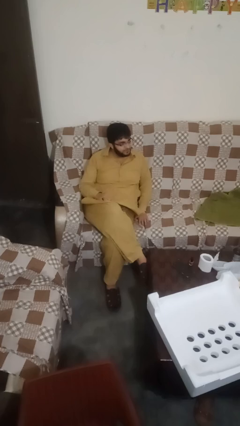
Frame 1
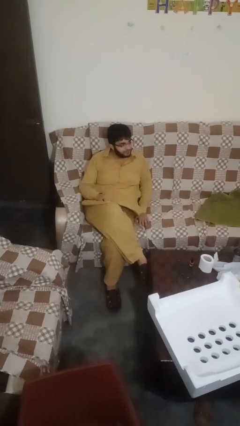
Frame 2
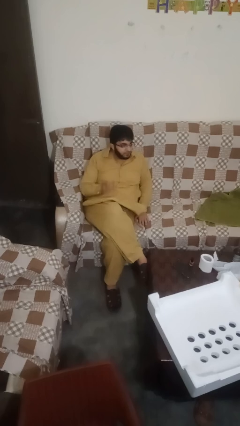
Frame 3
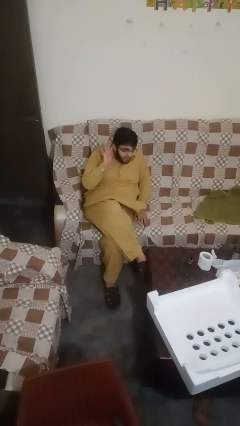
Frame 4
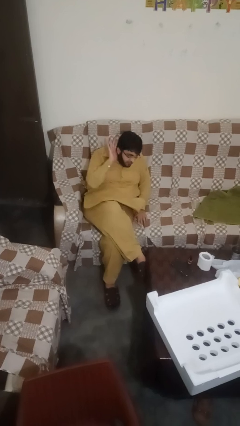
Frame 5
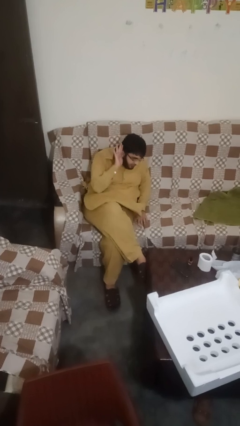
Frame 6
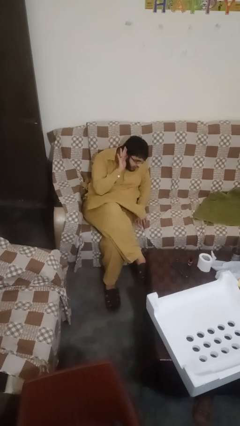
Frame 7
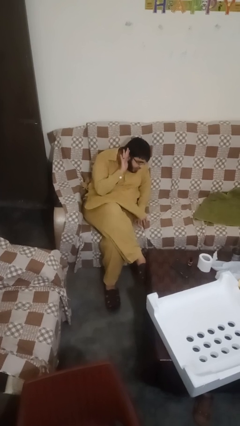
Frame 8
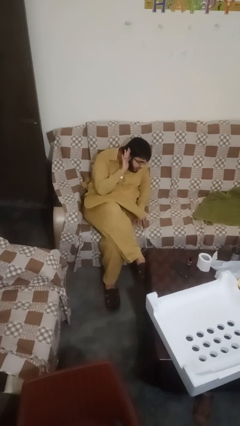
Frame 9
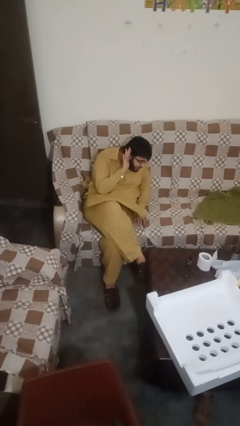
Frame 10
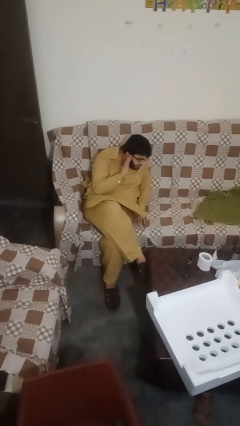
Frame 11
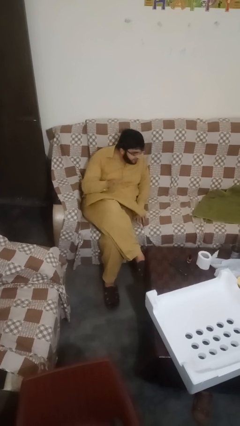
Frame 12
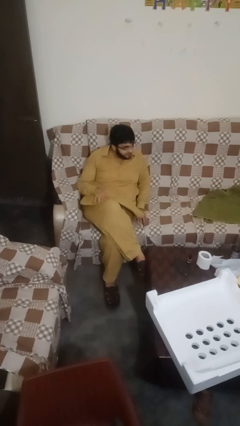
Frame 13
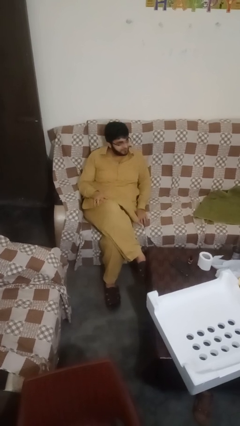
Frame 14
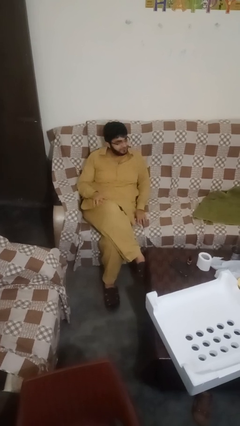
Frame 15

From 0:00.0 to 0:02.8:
person gestures listen closely

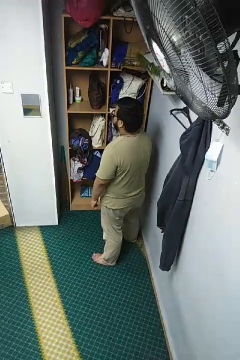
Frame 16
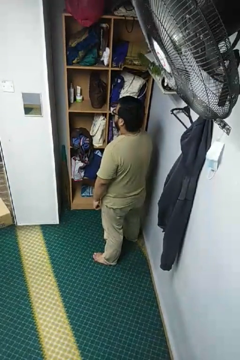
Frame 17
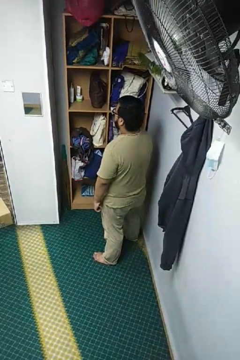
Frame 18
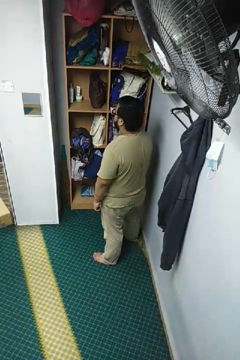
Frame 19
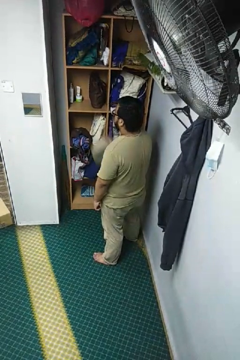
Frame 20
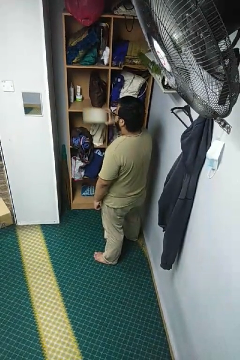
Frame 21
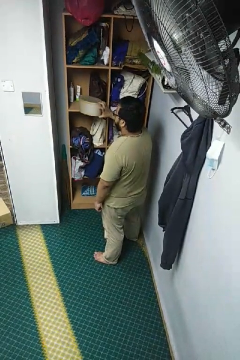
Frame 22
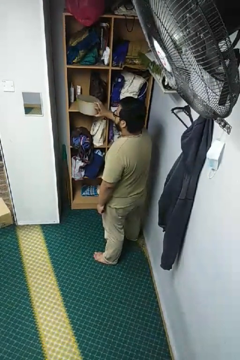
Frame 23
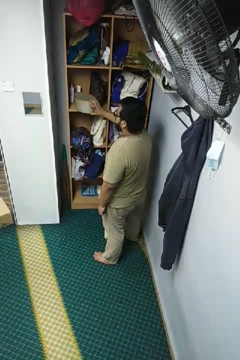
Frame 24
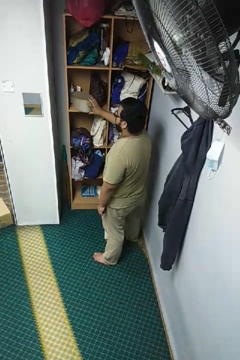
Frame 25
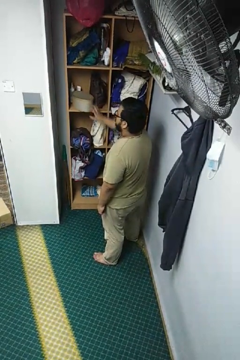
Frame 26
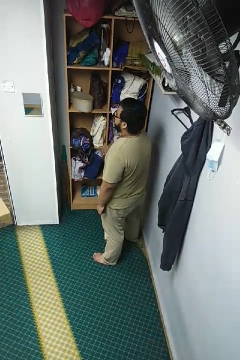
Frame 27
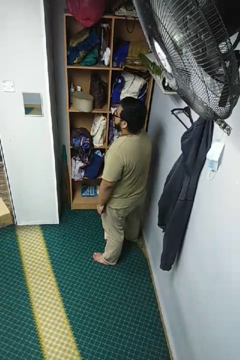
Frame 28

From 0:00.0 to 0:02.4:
person puts down object into cabinet

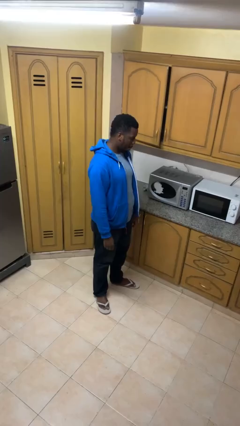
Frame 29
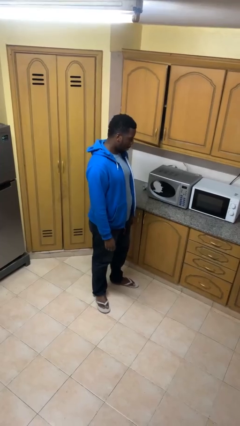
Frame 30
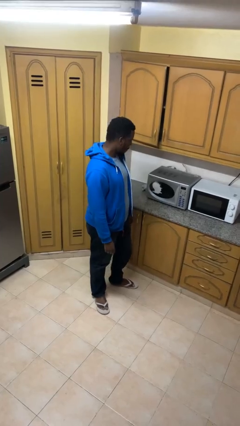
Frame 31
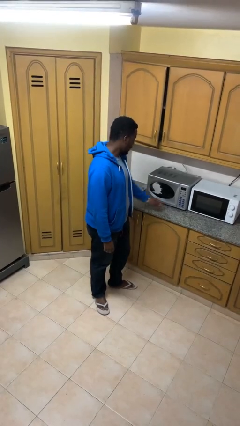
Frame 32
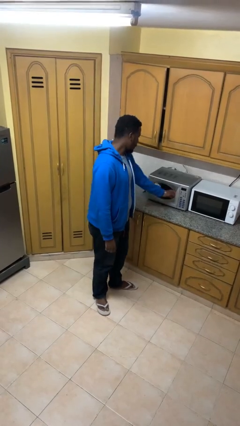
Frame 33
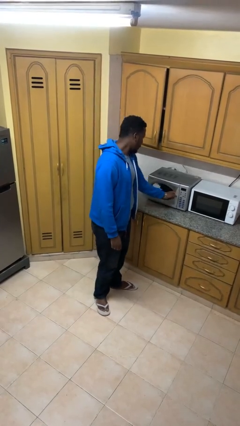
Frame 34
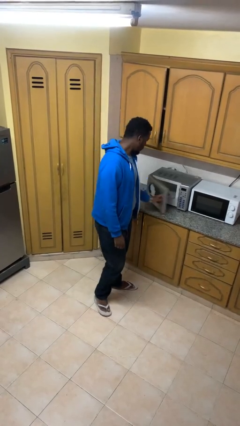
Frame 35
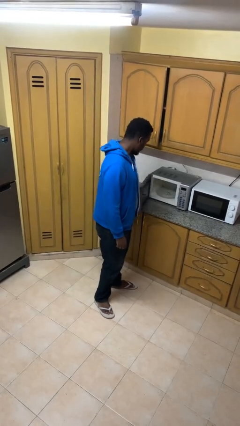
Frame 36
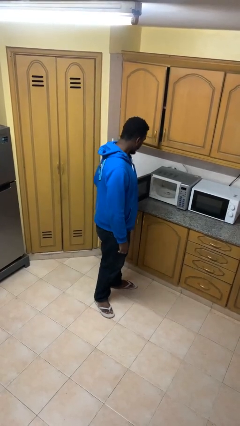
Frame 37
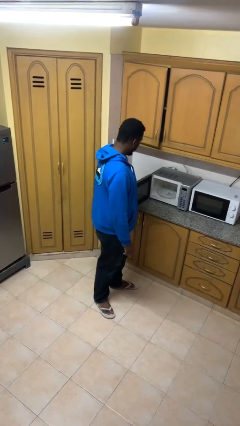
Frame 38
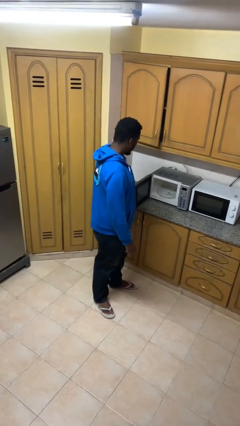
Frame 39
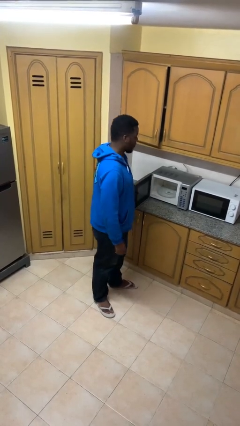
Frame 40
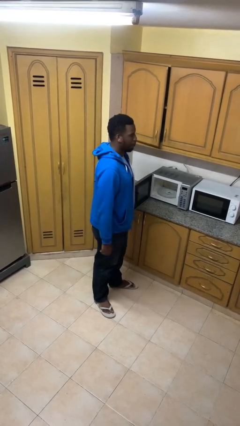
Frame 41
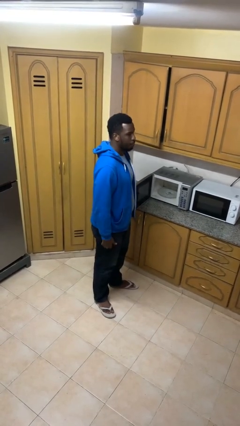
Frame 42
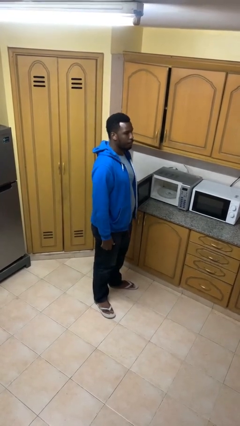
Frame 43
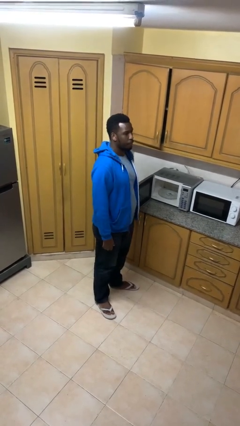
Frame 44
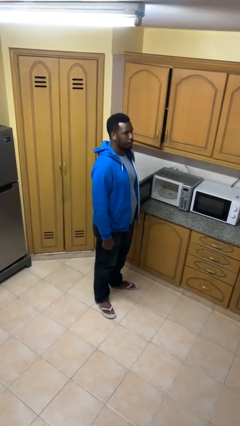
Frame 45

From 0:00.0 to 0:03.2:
person opens microwave

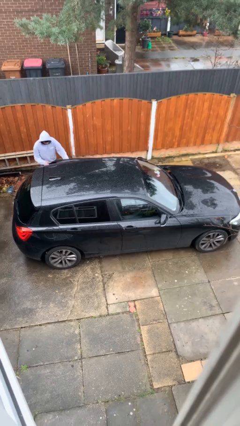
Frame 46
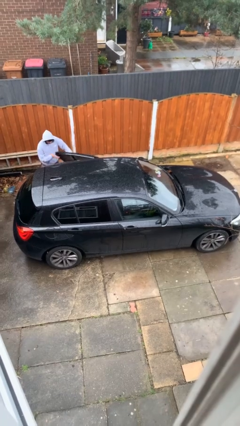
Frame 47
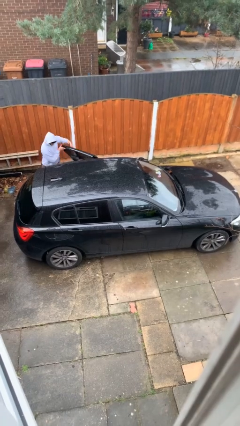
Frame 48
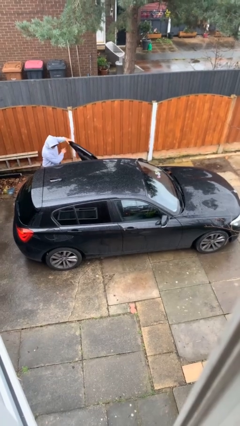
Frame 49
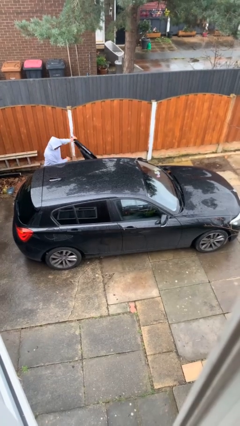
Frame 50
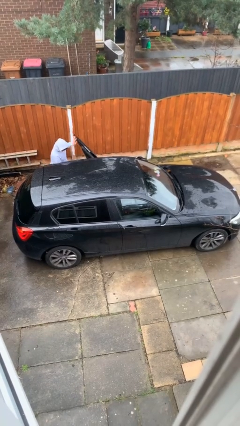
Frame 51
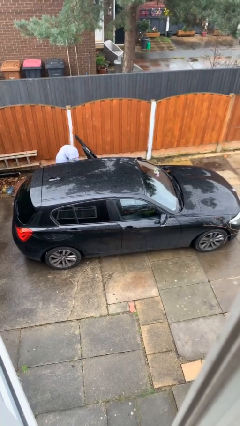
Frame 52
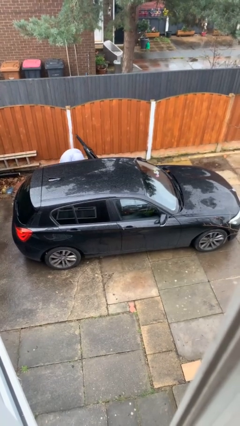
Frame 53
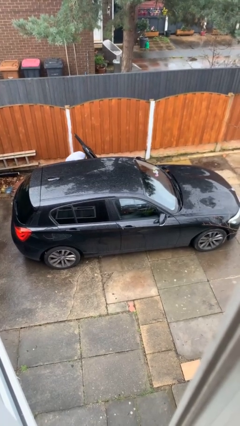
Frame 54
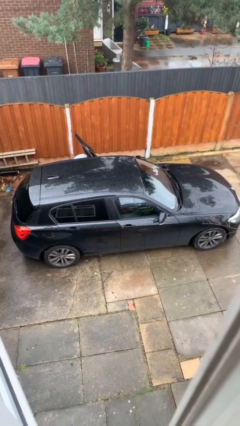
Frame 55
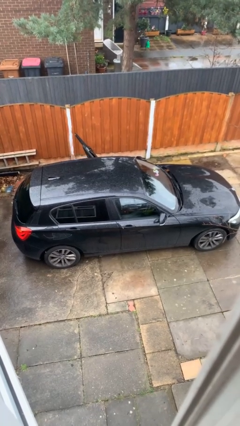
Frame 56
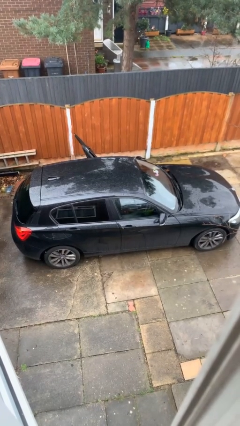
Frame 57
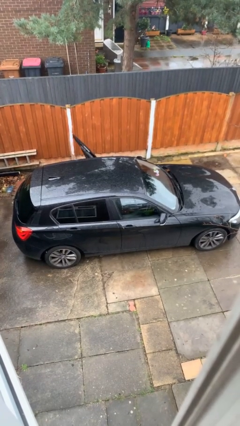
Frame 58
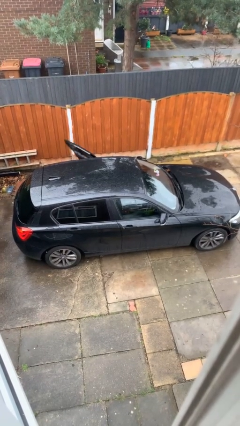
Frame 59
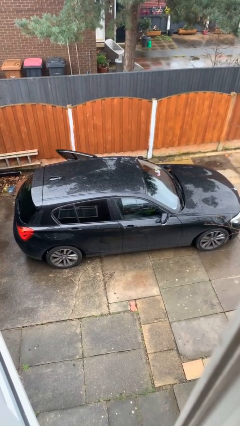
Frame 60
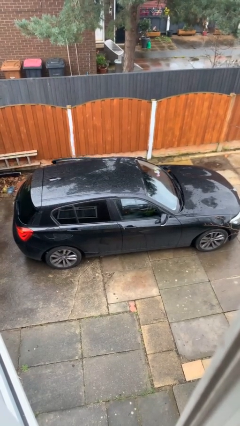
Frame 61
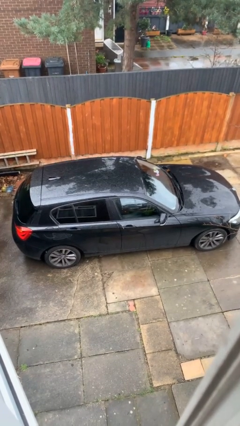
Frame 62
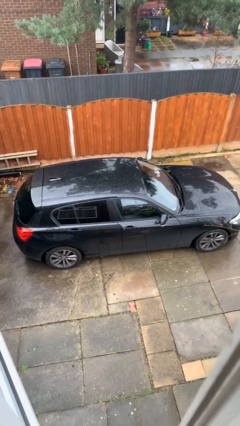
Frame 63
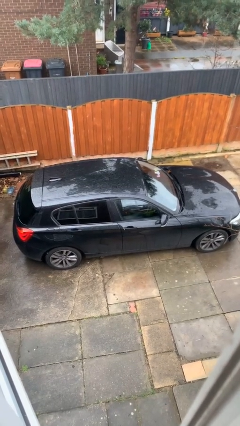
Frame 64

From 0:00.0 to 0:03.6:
car picks up person

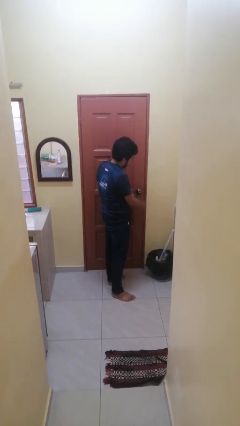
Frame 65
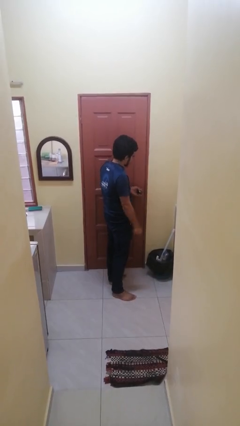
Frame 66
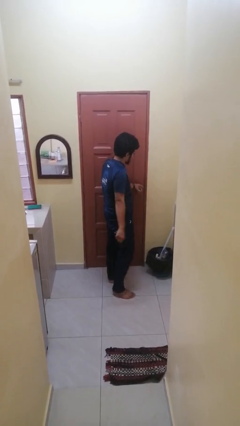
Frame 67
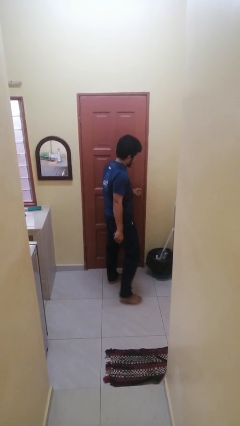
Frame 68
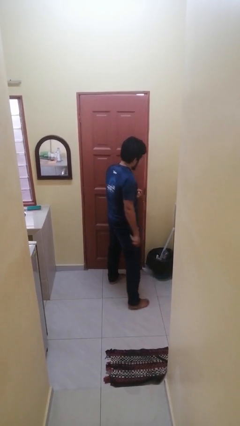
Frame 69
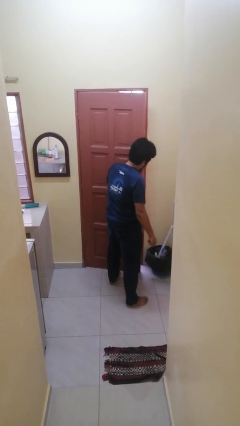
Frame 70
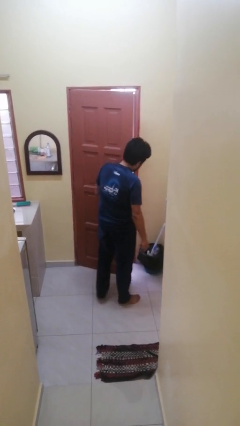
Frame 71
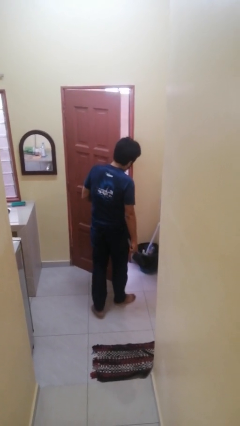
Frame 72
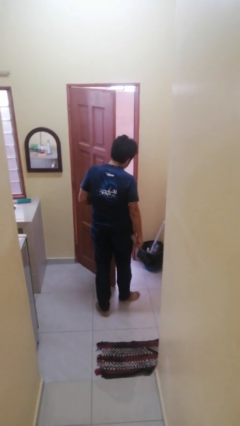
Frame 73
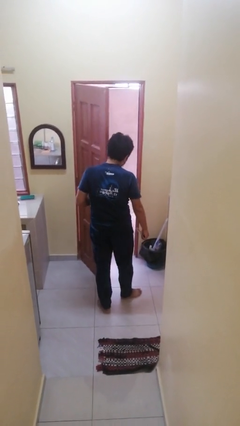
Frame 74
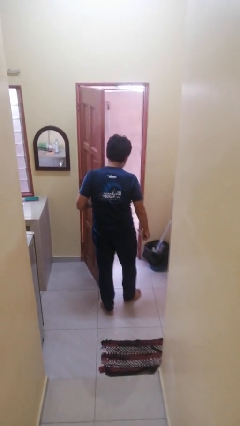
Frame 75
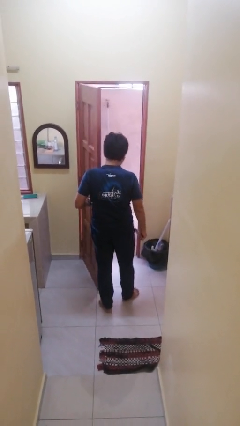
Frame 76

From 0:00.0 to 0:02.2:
person opens facility door

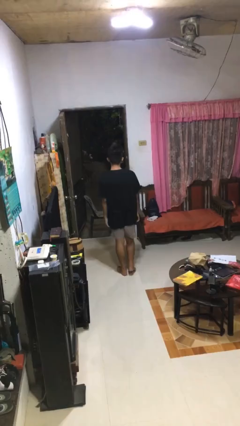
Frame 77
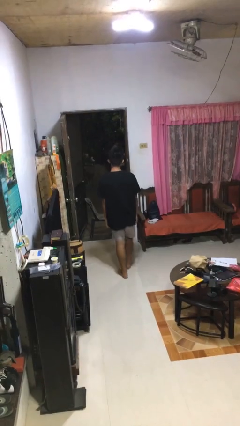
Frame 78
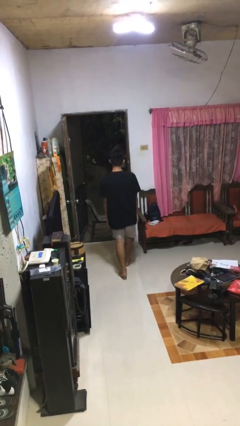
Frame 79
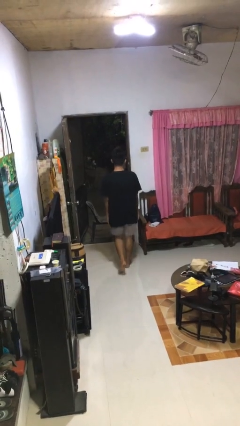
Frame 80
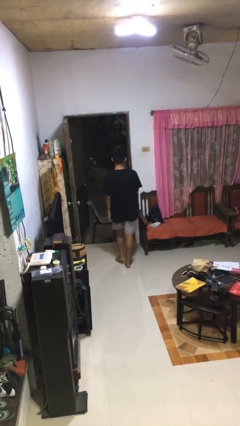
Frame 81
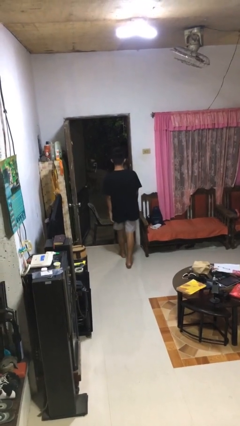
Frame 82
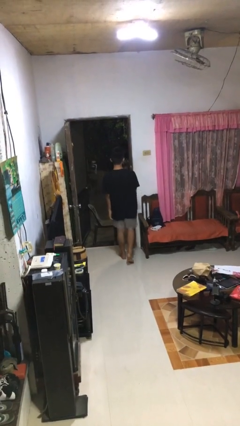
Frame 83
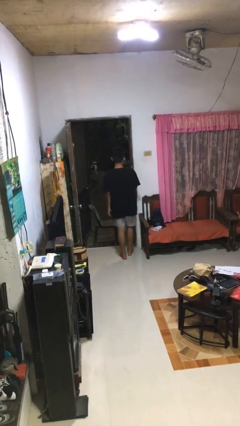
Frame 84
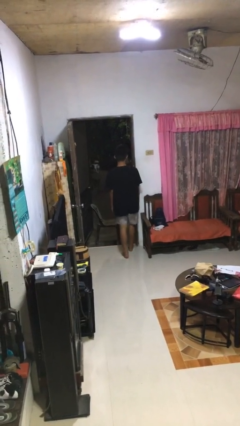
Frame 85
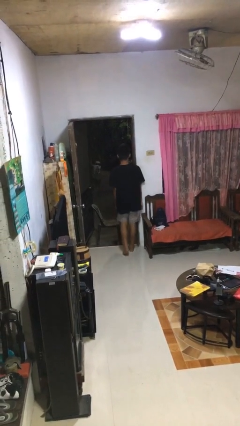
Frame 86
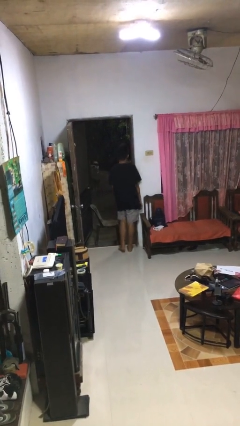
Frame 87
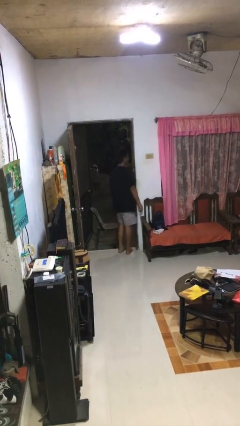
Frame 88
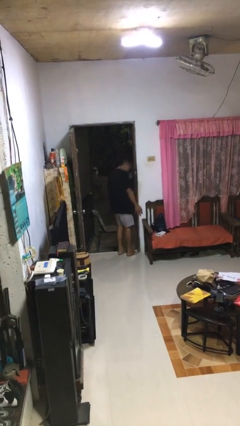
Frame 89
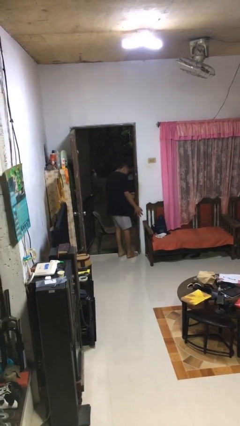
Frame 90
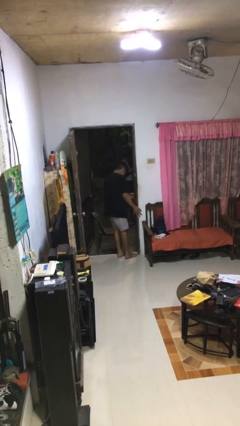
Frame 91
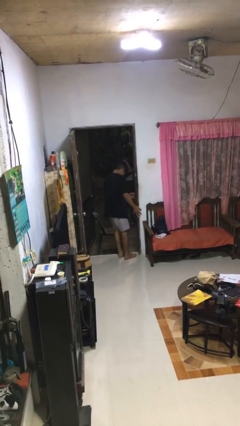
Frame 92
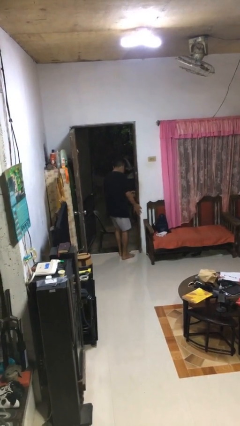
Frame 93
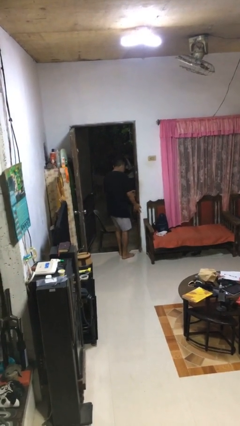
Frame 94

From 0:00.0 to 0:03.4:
person bumps into wall
